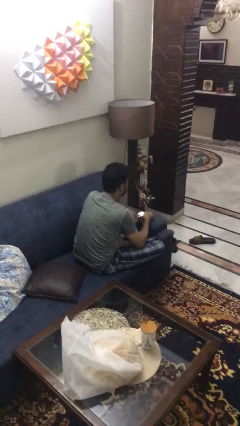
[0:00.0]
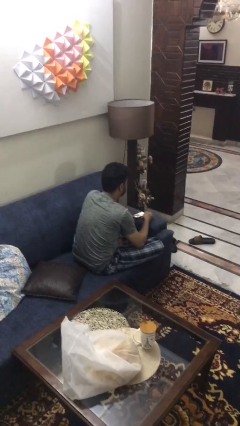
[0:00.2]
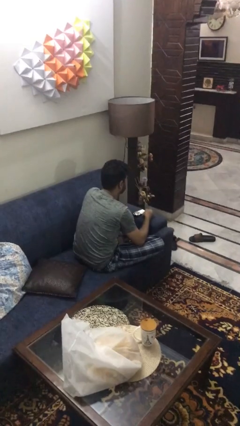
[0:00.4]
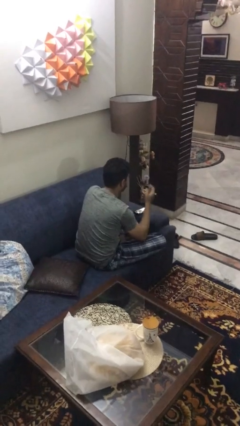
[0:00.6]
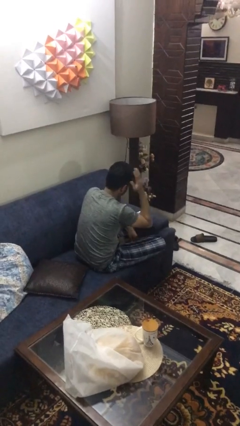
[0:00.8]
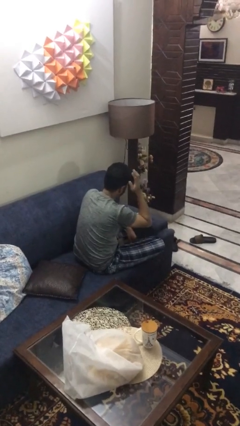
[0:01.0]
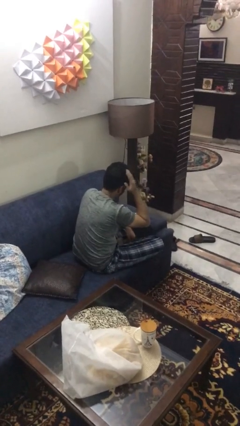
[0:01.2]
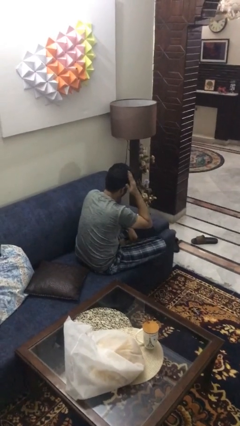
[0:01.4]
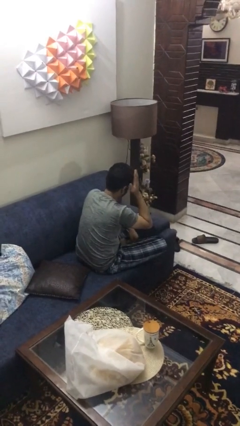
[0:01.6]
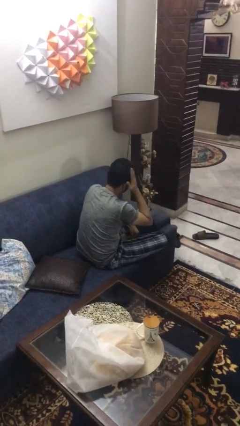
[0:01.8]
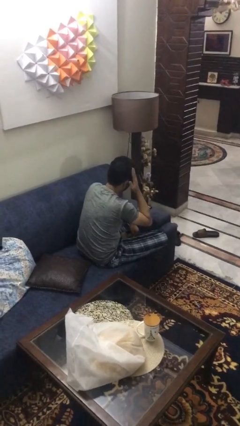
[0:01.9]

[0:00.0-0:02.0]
person strokes hair

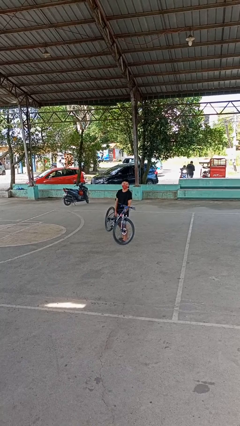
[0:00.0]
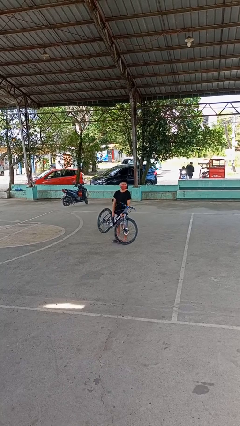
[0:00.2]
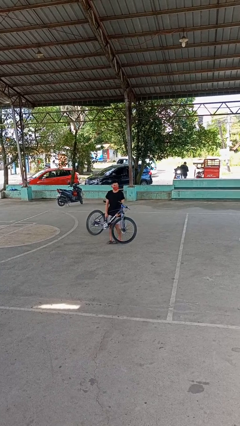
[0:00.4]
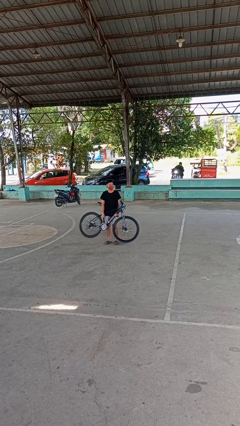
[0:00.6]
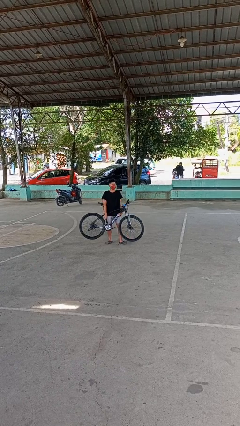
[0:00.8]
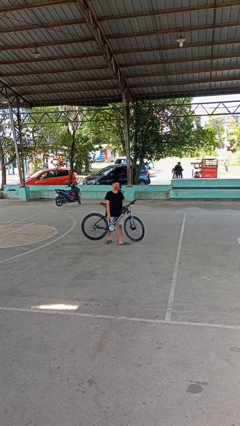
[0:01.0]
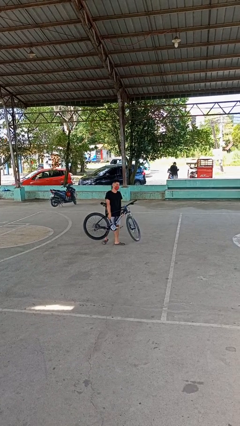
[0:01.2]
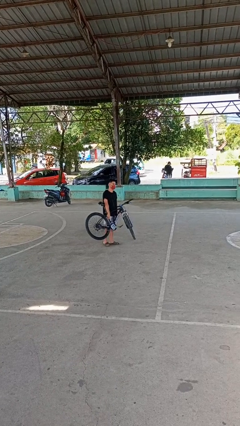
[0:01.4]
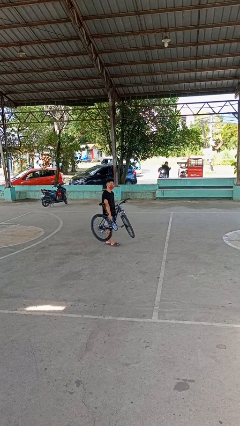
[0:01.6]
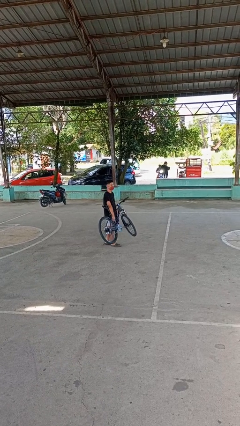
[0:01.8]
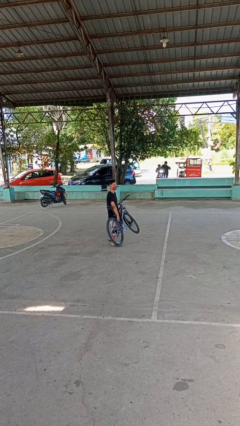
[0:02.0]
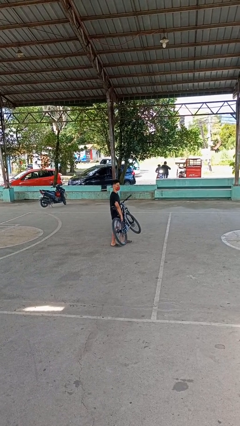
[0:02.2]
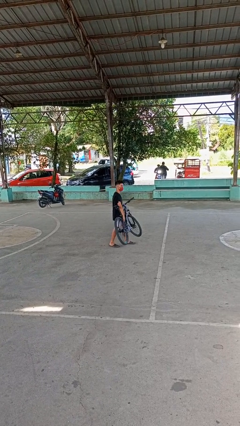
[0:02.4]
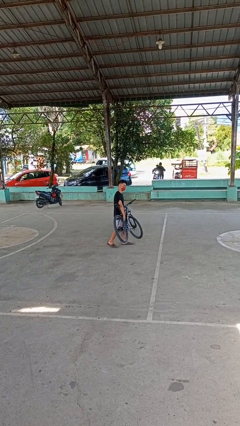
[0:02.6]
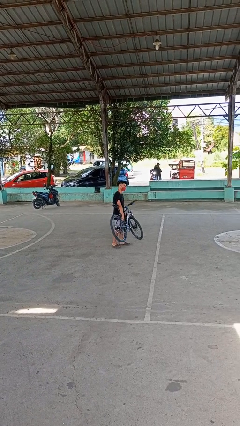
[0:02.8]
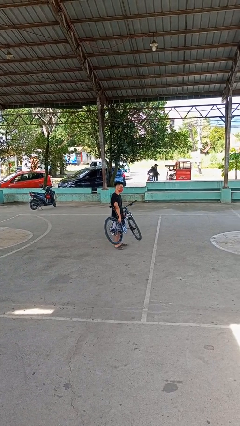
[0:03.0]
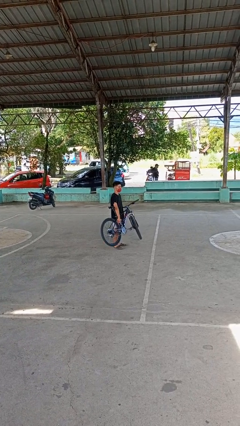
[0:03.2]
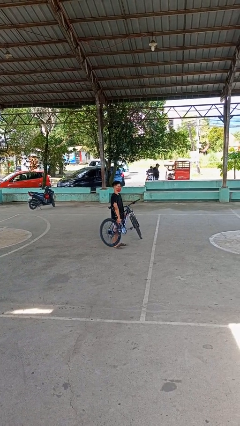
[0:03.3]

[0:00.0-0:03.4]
person carries bicycle

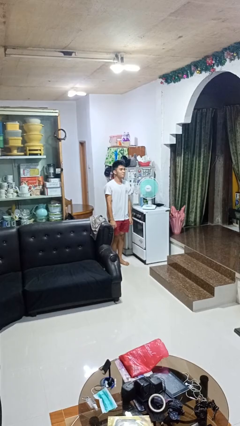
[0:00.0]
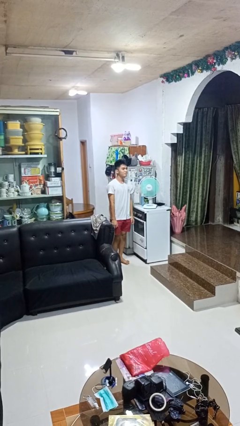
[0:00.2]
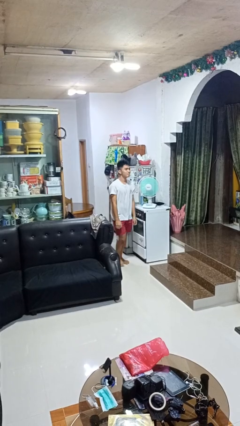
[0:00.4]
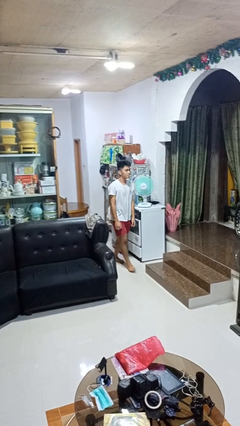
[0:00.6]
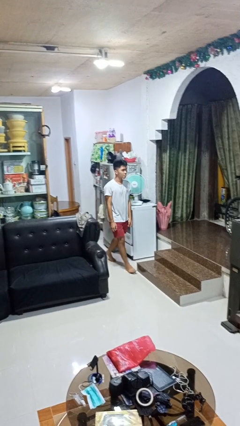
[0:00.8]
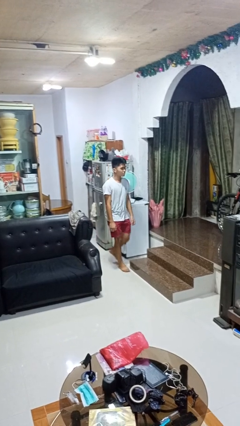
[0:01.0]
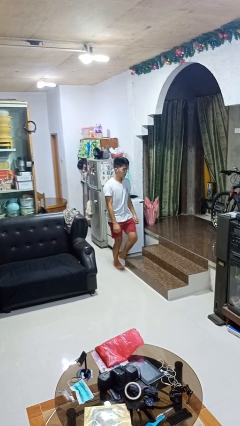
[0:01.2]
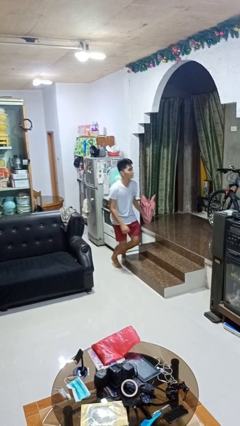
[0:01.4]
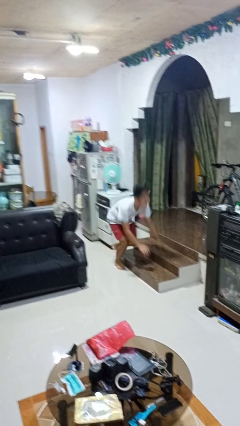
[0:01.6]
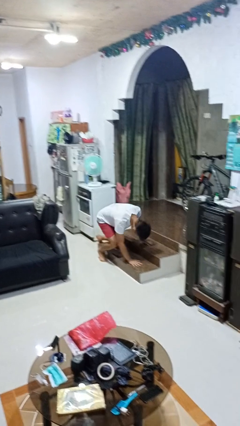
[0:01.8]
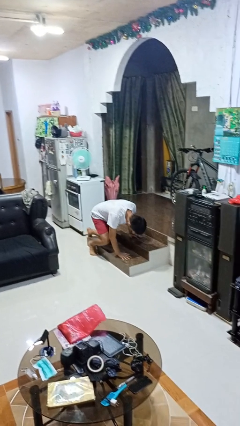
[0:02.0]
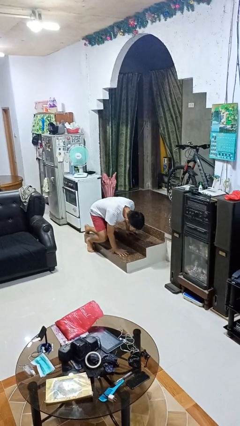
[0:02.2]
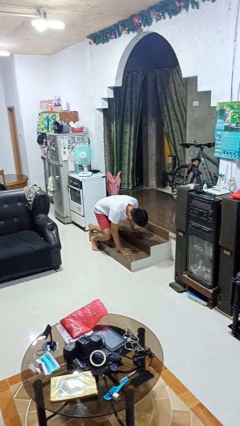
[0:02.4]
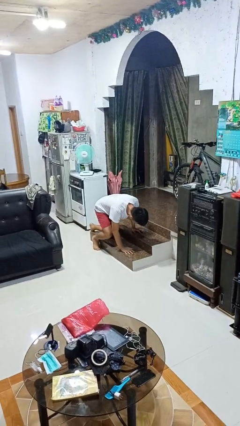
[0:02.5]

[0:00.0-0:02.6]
person trips on object on floor

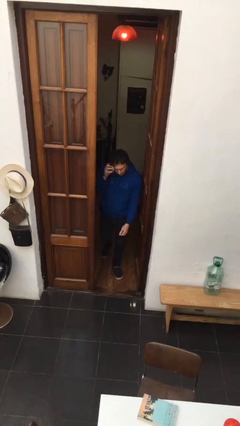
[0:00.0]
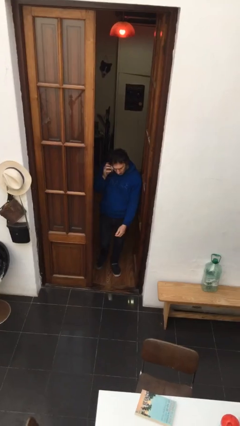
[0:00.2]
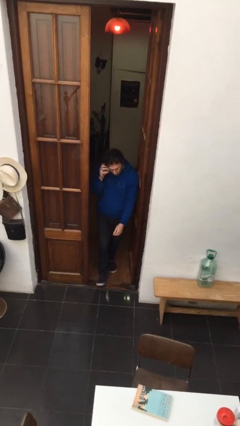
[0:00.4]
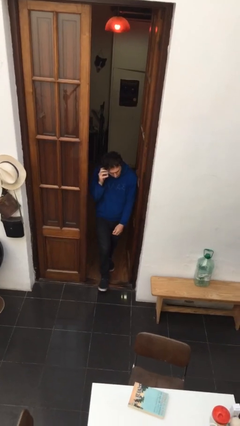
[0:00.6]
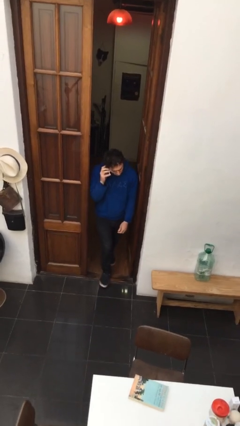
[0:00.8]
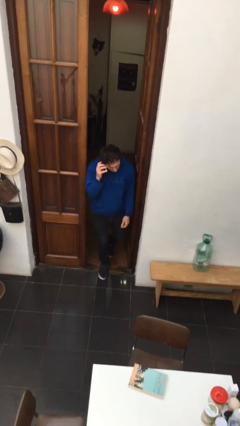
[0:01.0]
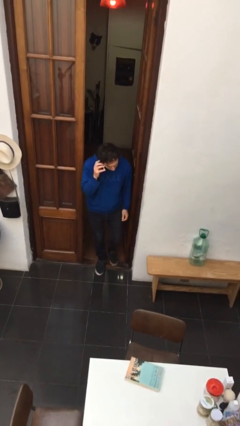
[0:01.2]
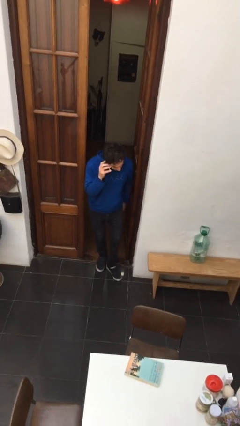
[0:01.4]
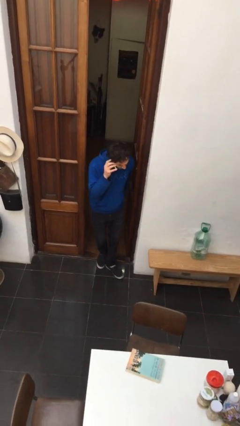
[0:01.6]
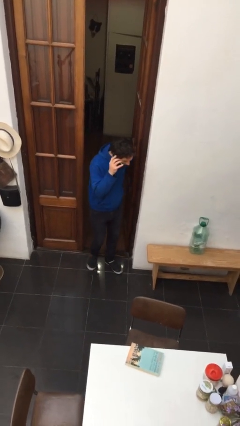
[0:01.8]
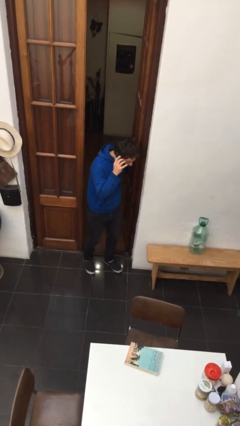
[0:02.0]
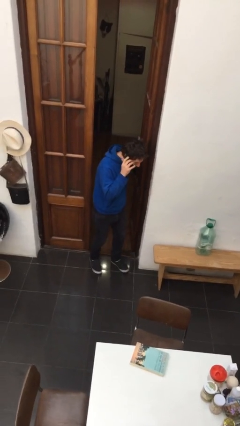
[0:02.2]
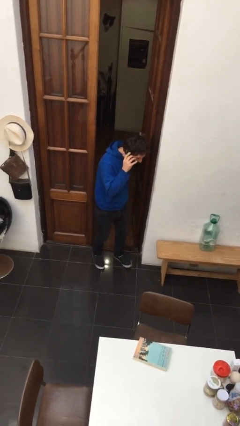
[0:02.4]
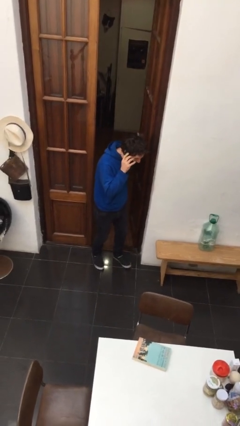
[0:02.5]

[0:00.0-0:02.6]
person enters scene through structure

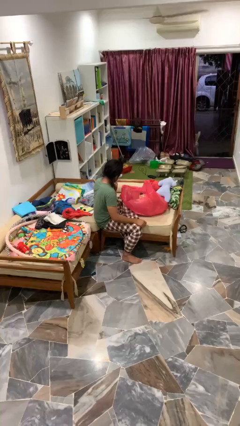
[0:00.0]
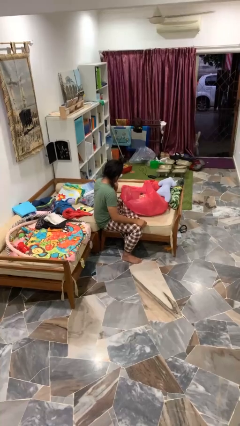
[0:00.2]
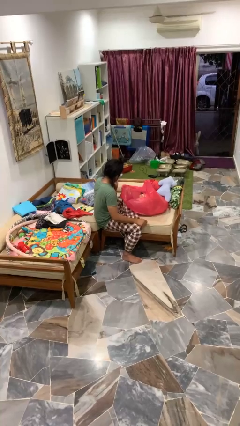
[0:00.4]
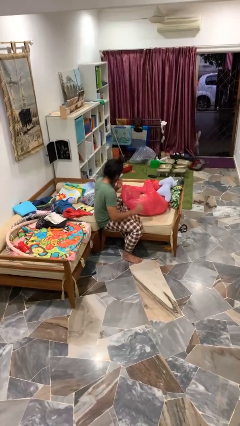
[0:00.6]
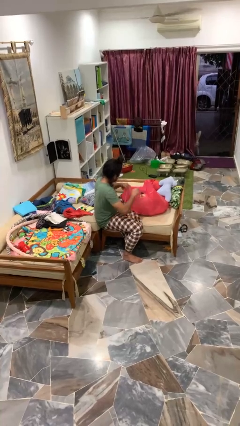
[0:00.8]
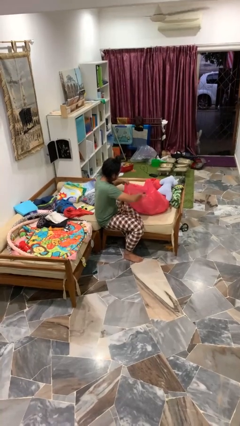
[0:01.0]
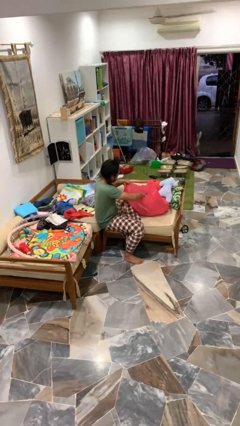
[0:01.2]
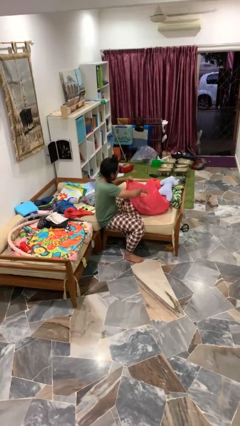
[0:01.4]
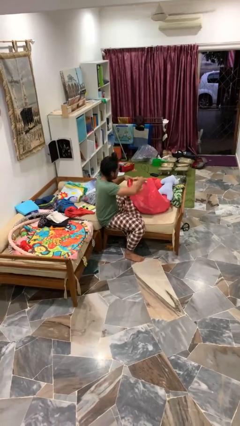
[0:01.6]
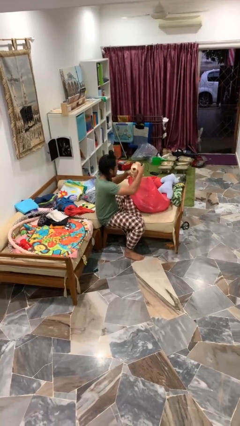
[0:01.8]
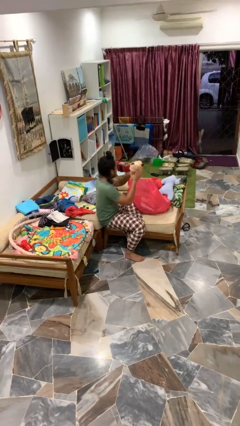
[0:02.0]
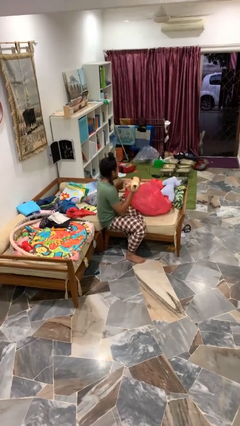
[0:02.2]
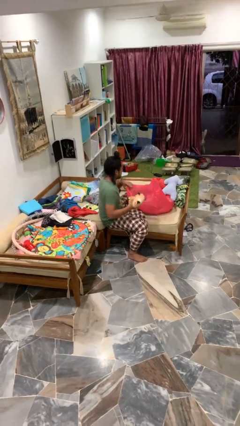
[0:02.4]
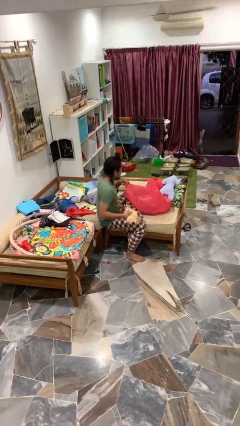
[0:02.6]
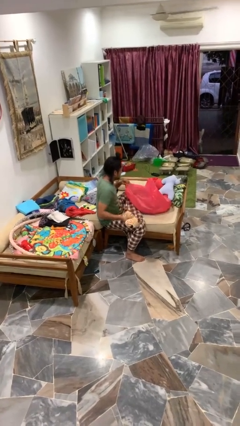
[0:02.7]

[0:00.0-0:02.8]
person takes object from bag

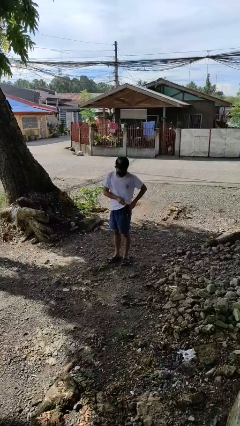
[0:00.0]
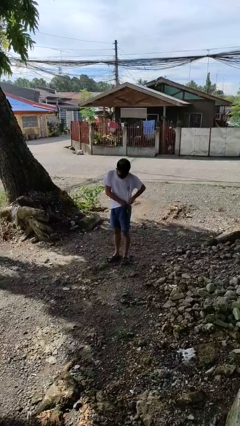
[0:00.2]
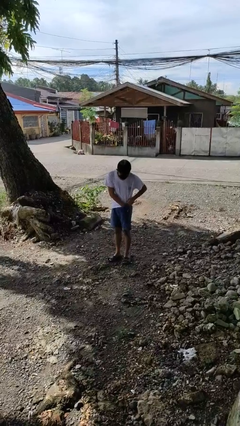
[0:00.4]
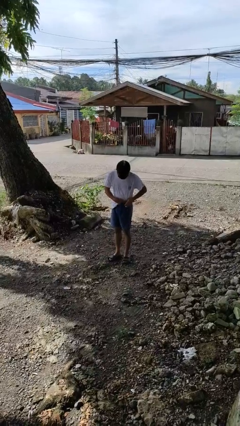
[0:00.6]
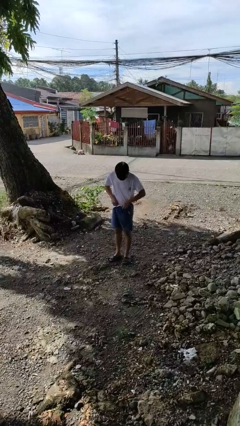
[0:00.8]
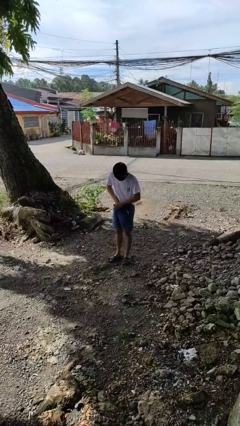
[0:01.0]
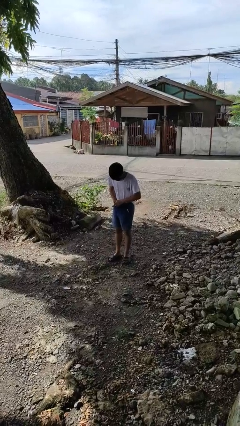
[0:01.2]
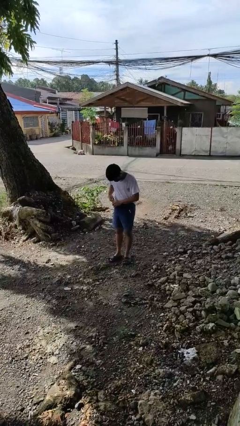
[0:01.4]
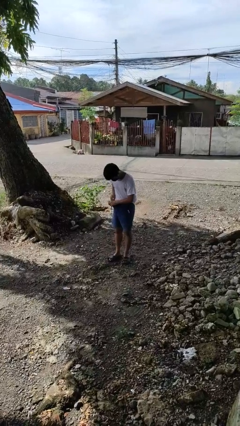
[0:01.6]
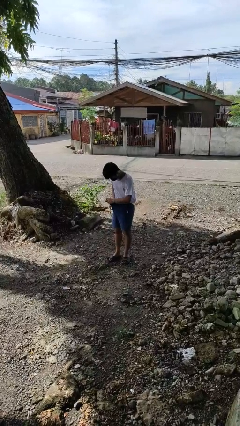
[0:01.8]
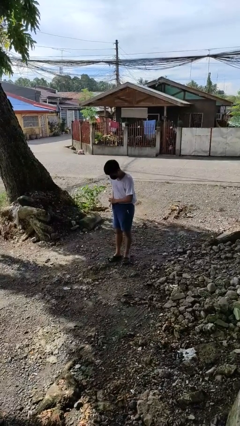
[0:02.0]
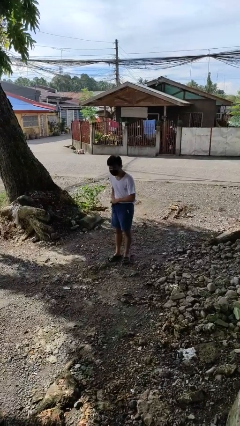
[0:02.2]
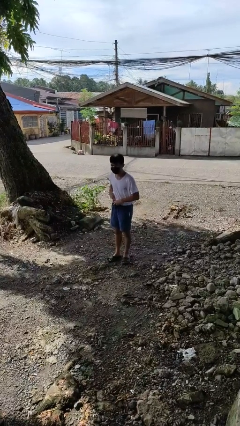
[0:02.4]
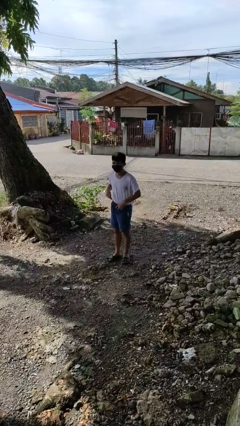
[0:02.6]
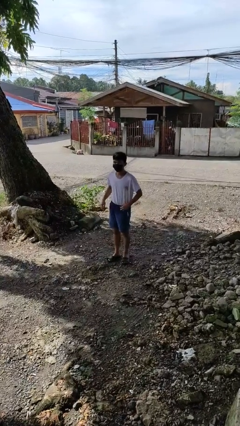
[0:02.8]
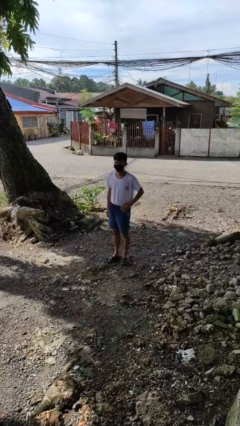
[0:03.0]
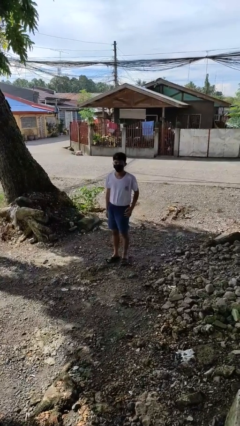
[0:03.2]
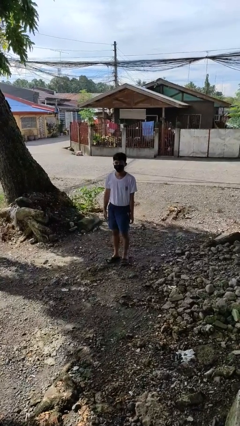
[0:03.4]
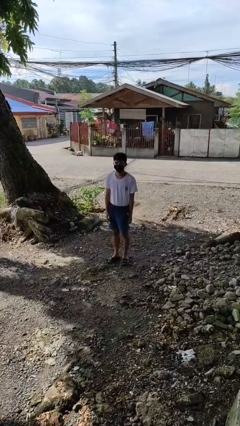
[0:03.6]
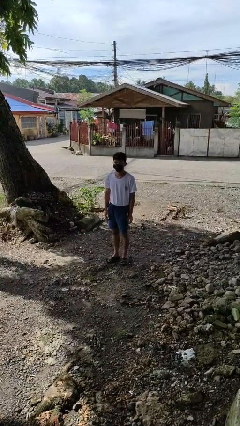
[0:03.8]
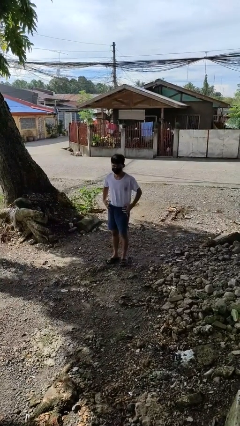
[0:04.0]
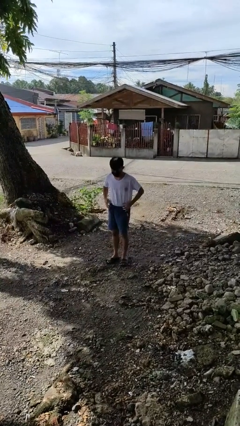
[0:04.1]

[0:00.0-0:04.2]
person tucks in shirt
